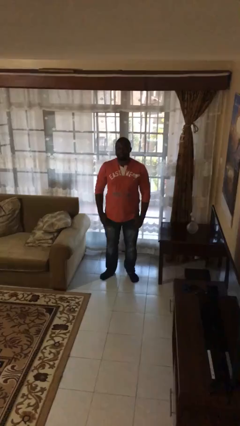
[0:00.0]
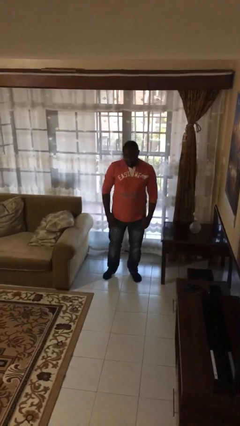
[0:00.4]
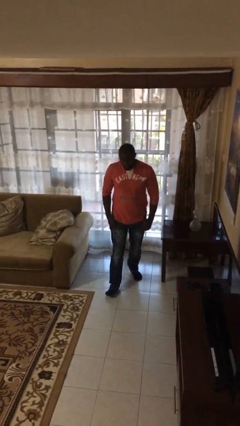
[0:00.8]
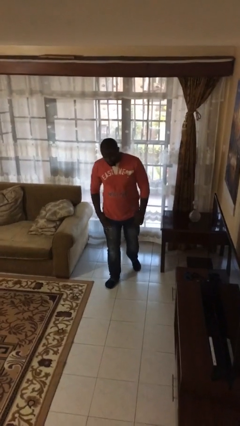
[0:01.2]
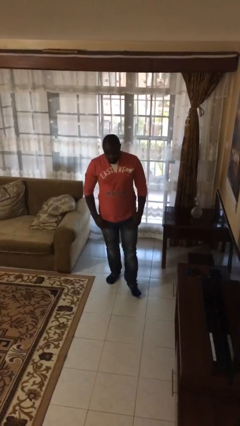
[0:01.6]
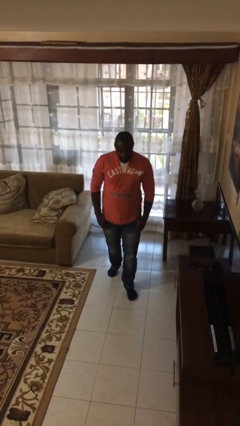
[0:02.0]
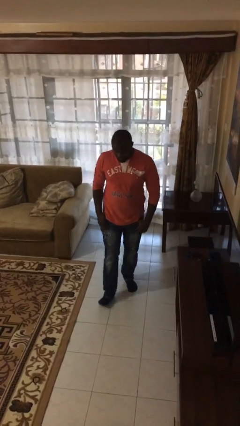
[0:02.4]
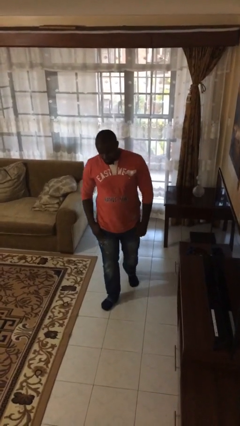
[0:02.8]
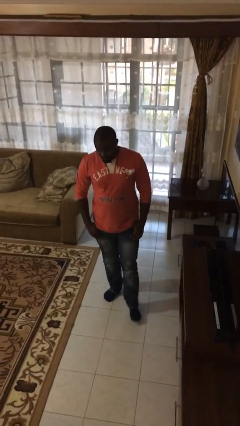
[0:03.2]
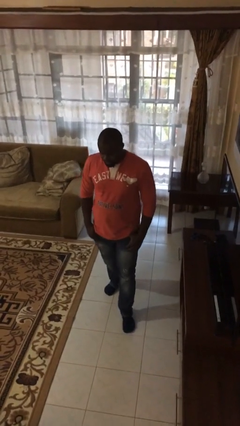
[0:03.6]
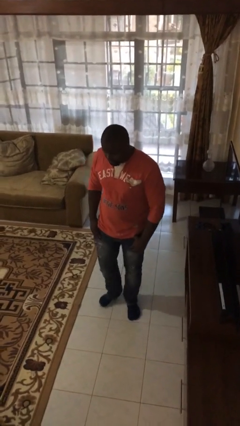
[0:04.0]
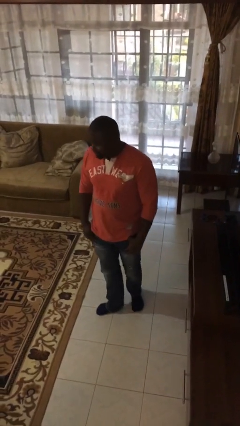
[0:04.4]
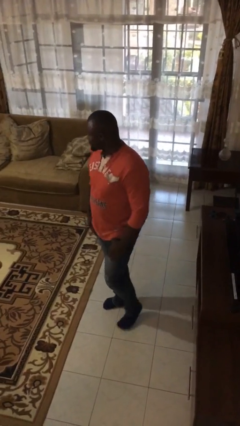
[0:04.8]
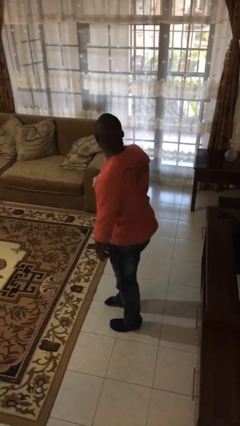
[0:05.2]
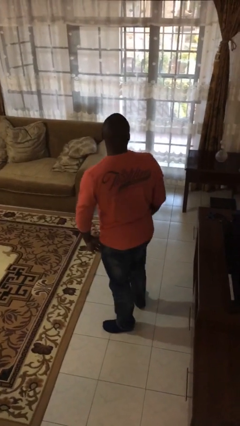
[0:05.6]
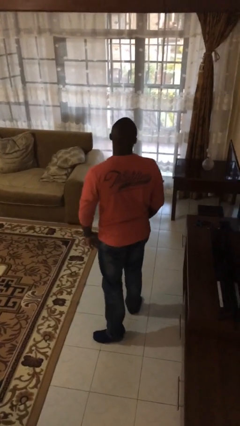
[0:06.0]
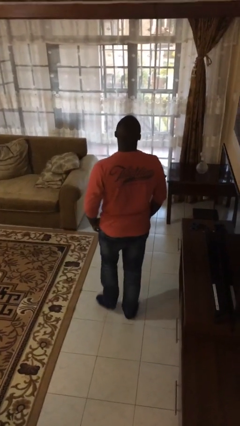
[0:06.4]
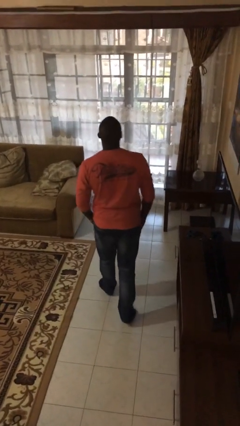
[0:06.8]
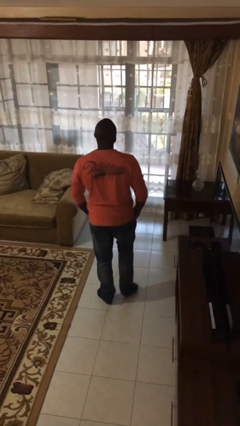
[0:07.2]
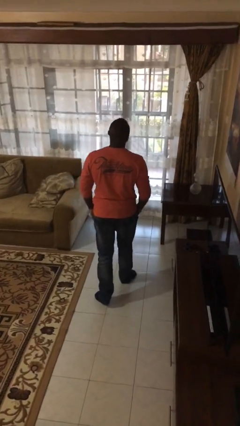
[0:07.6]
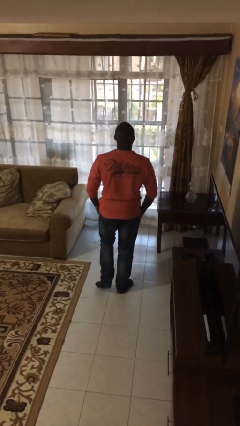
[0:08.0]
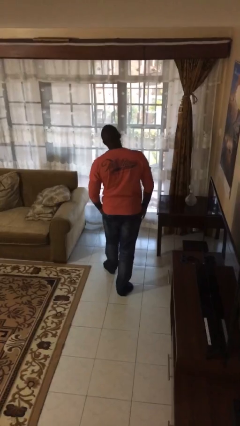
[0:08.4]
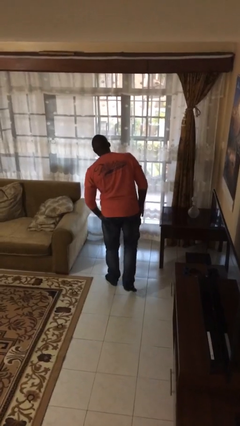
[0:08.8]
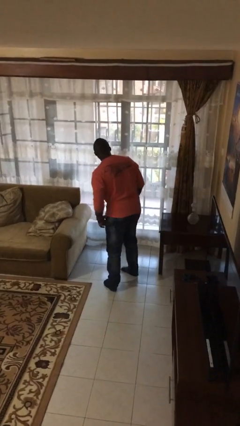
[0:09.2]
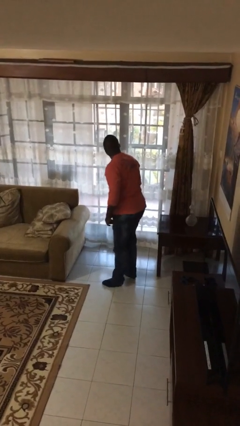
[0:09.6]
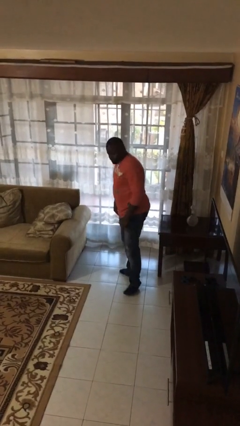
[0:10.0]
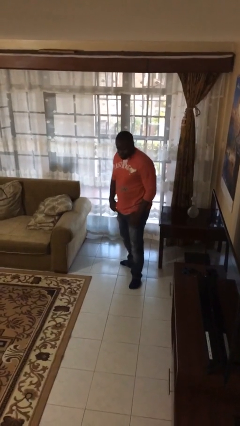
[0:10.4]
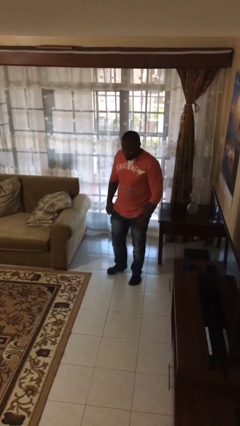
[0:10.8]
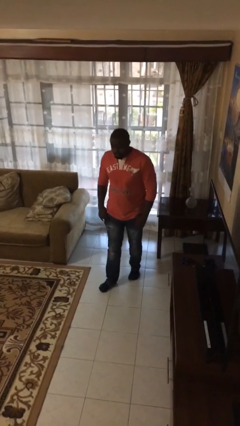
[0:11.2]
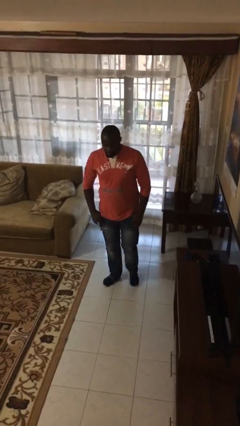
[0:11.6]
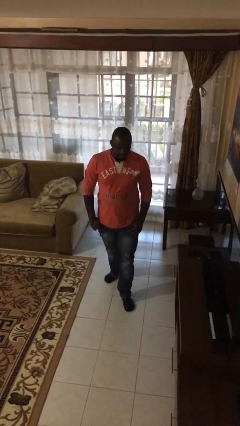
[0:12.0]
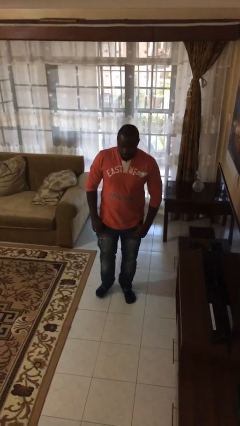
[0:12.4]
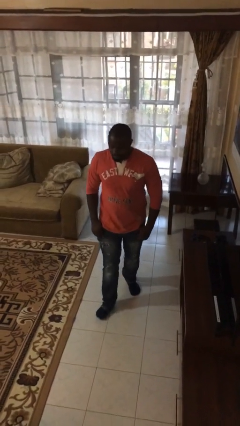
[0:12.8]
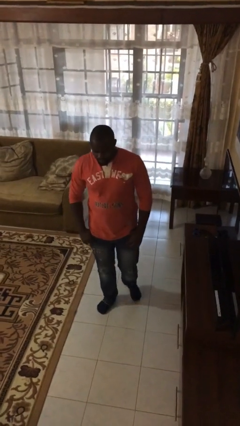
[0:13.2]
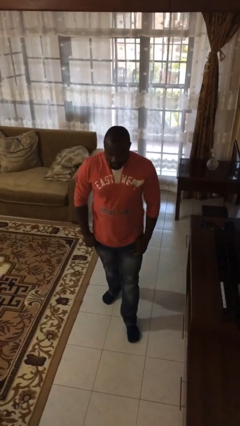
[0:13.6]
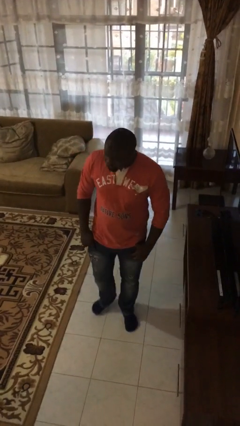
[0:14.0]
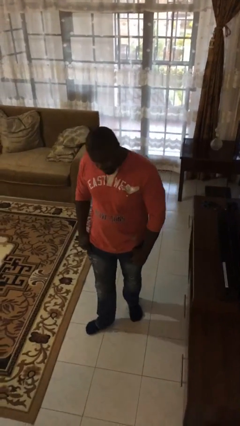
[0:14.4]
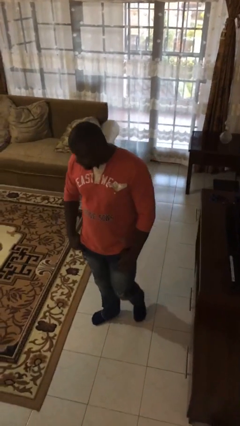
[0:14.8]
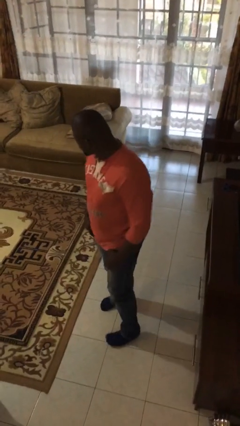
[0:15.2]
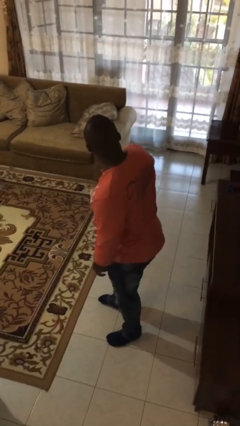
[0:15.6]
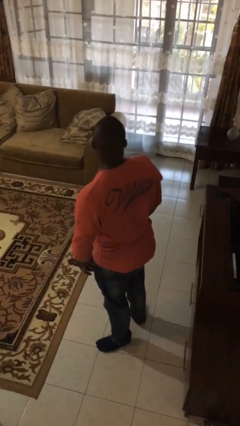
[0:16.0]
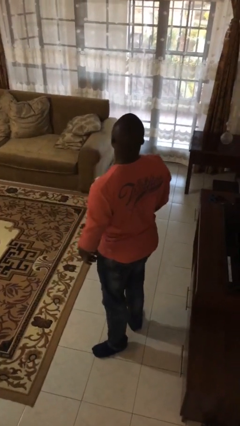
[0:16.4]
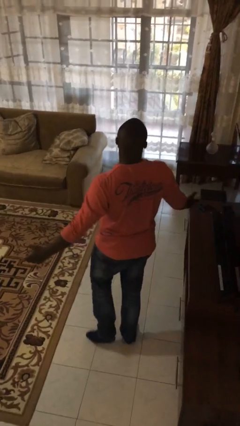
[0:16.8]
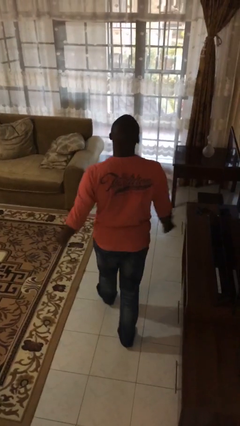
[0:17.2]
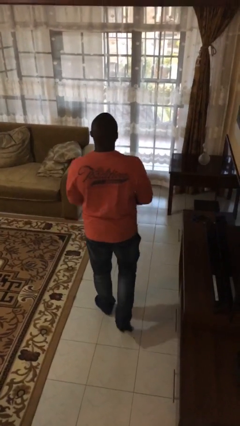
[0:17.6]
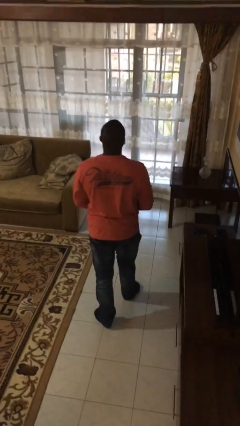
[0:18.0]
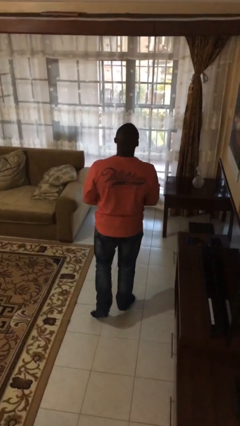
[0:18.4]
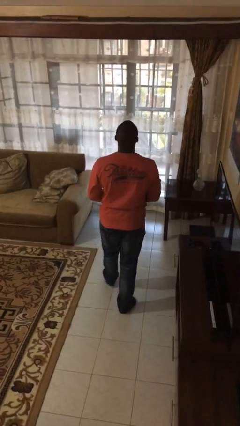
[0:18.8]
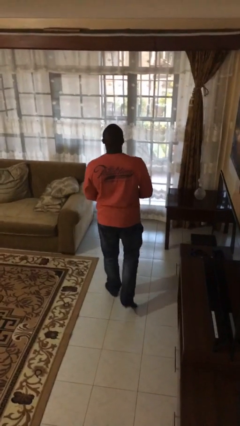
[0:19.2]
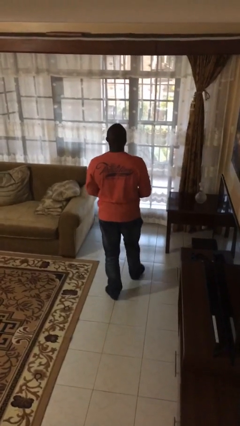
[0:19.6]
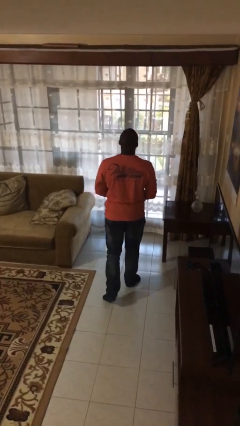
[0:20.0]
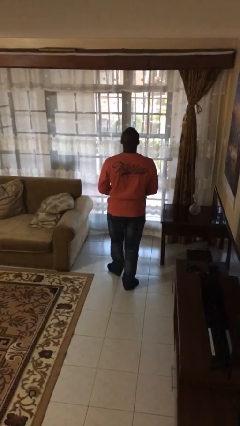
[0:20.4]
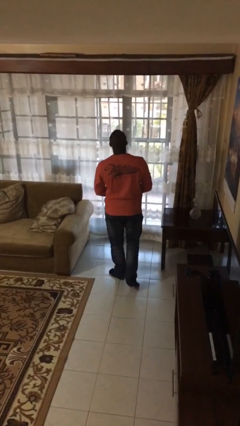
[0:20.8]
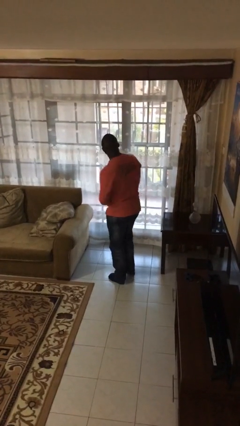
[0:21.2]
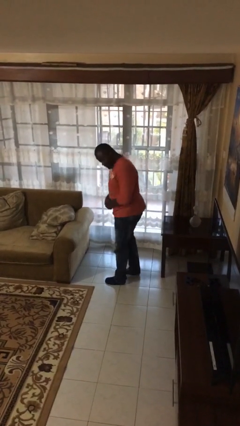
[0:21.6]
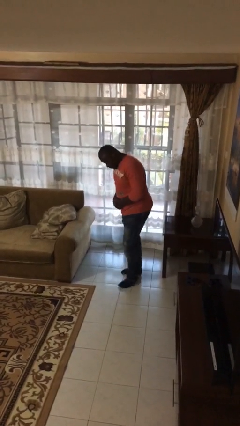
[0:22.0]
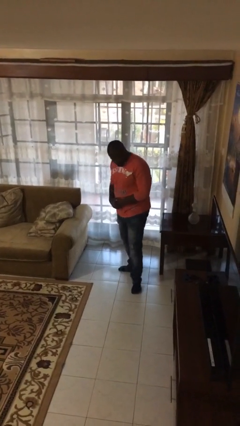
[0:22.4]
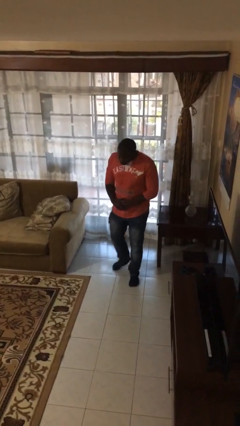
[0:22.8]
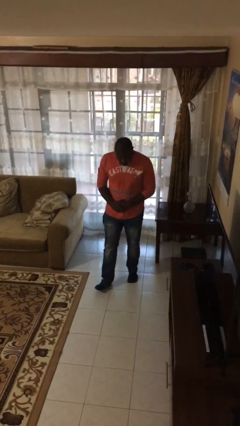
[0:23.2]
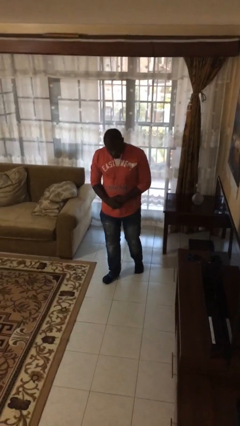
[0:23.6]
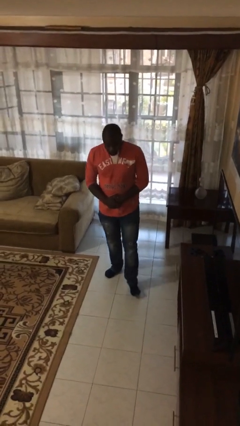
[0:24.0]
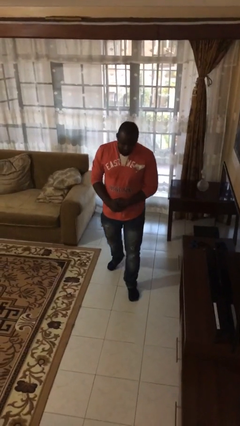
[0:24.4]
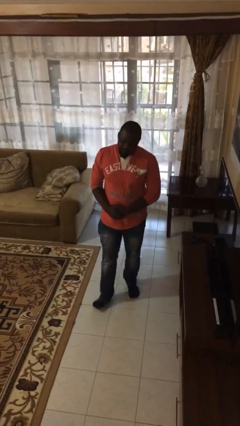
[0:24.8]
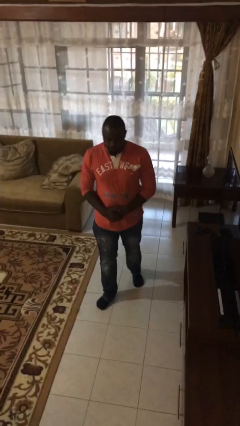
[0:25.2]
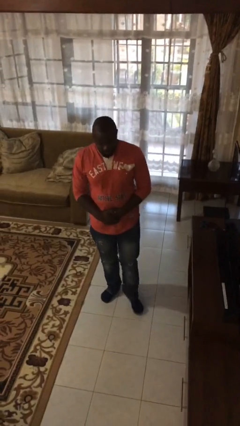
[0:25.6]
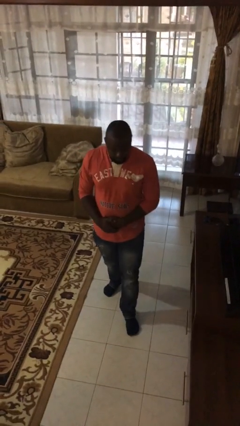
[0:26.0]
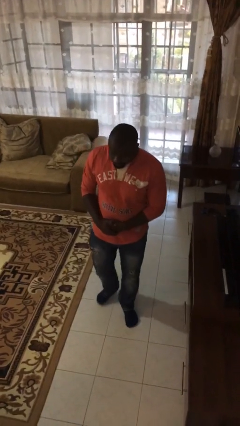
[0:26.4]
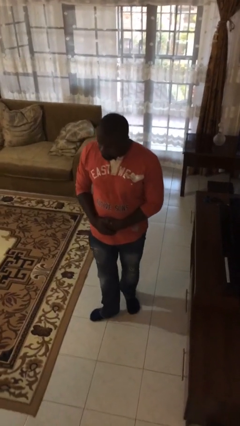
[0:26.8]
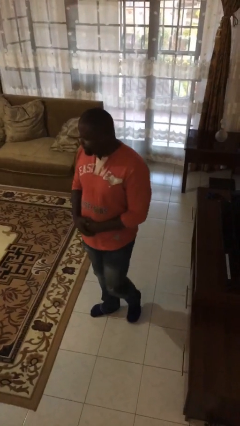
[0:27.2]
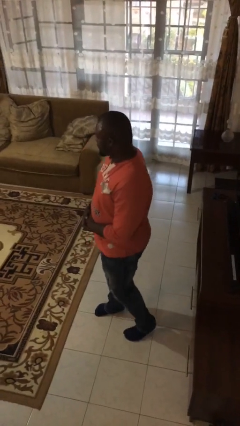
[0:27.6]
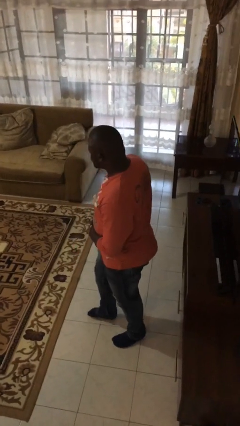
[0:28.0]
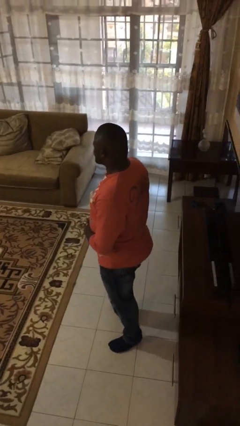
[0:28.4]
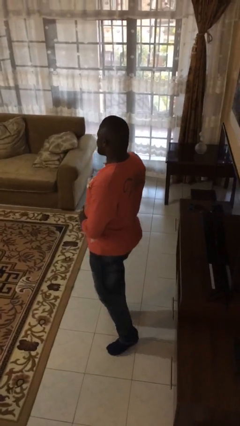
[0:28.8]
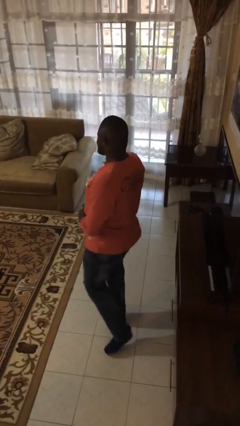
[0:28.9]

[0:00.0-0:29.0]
person walks

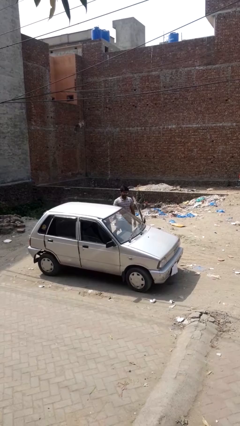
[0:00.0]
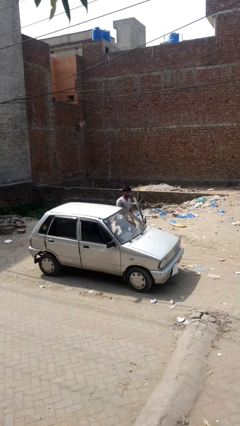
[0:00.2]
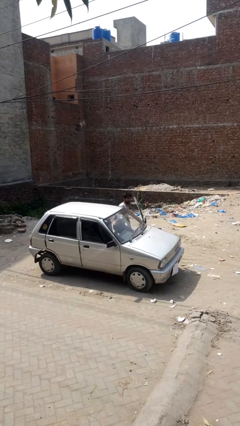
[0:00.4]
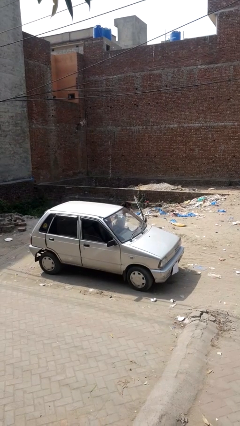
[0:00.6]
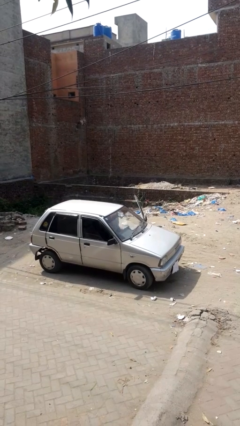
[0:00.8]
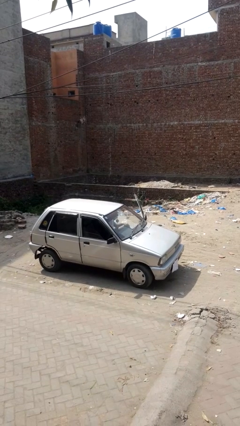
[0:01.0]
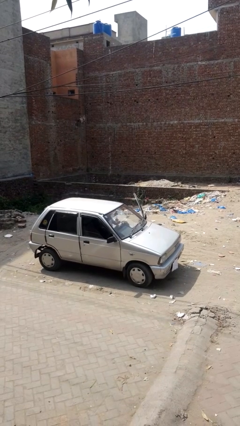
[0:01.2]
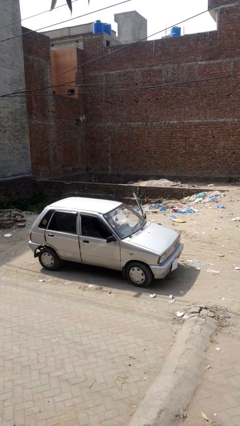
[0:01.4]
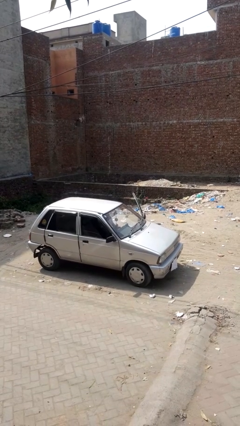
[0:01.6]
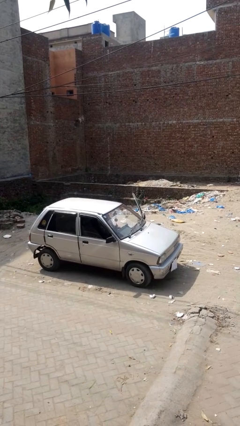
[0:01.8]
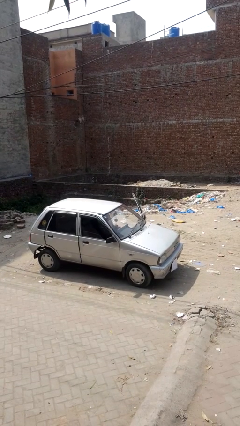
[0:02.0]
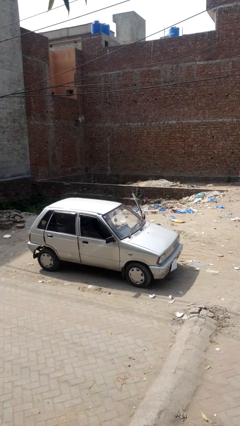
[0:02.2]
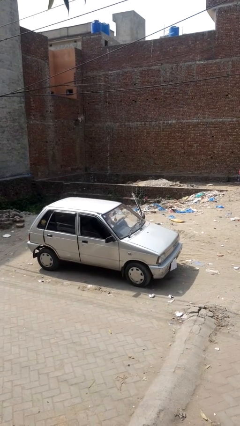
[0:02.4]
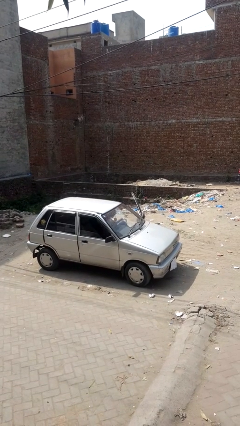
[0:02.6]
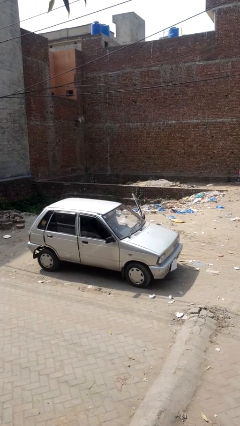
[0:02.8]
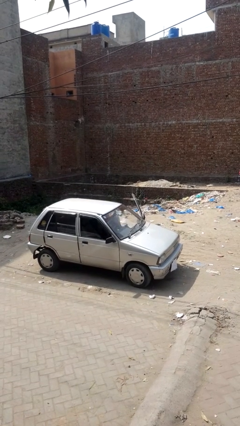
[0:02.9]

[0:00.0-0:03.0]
person enters car

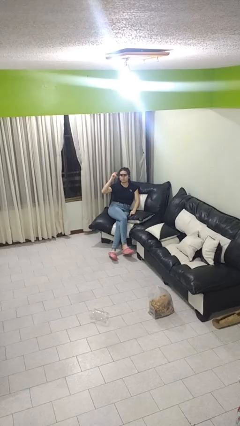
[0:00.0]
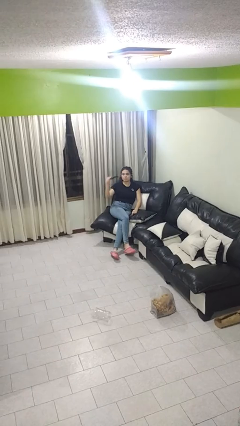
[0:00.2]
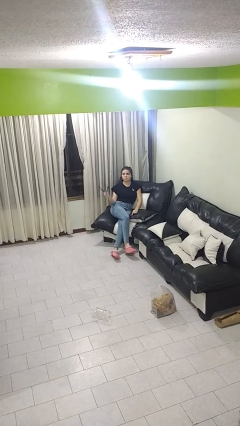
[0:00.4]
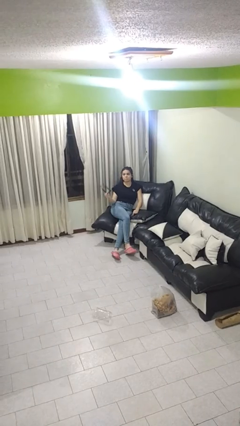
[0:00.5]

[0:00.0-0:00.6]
person takes off sunglasses
